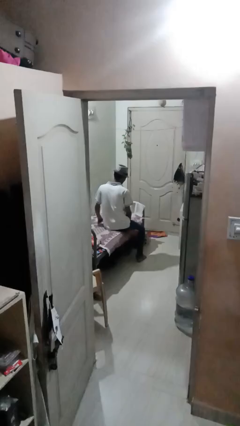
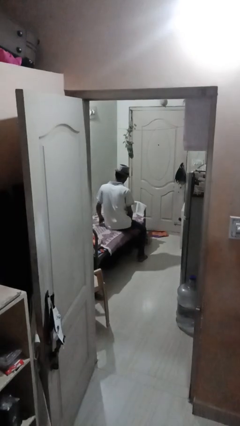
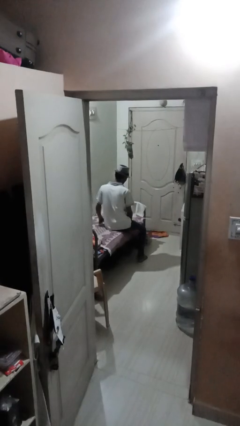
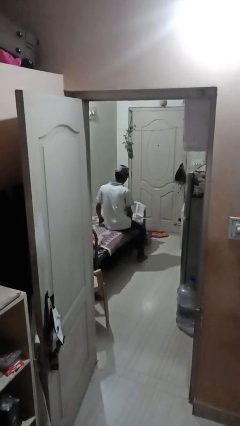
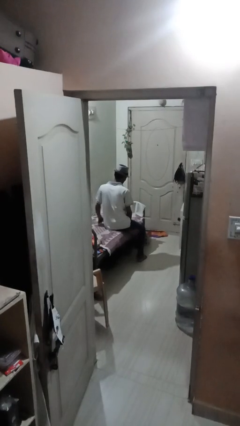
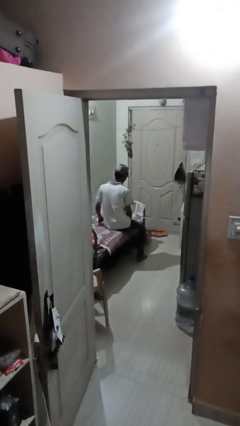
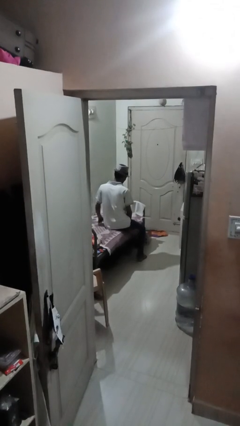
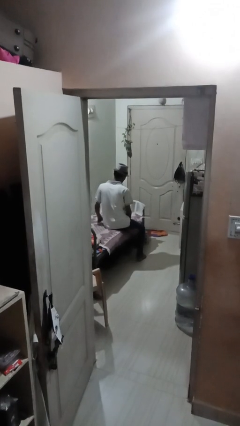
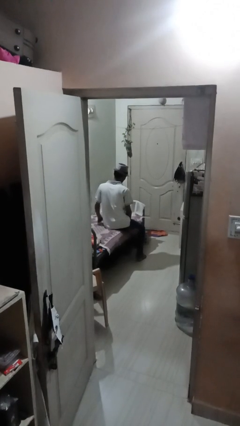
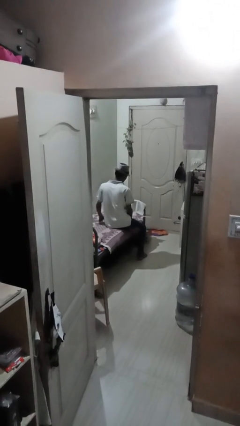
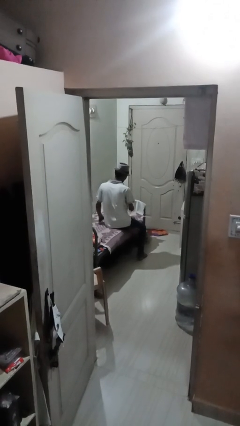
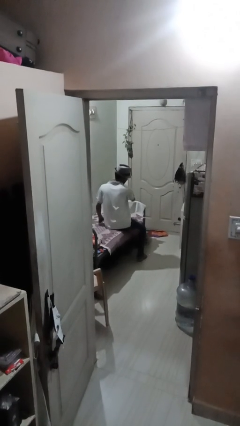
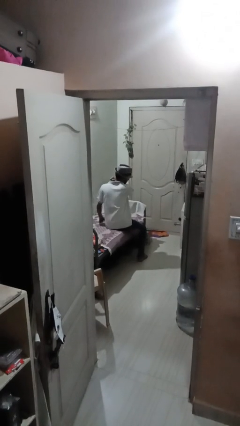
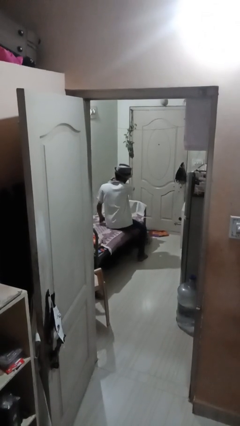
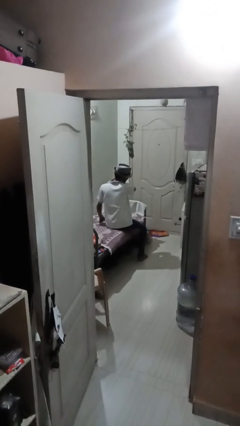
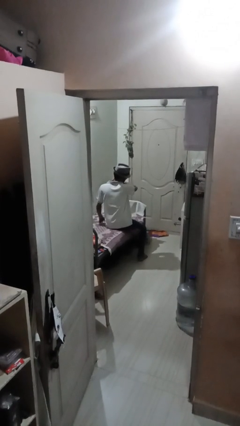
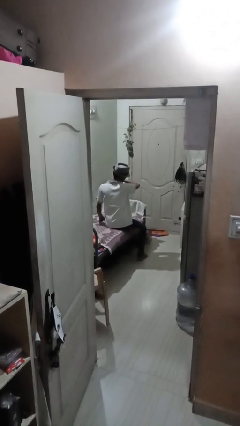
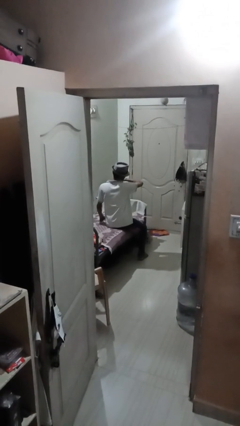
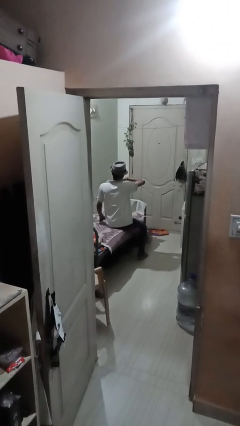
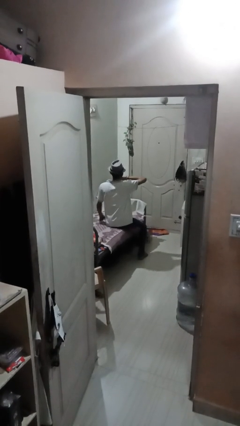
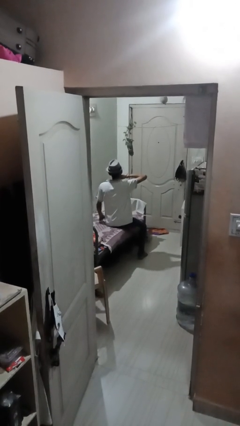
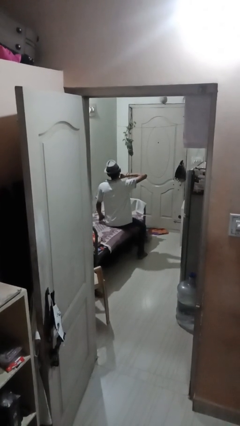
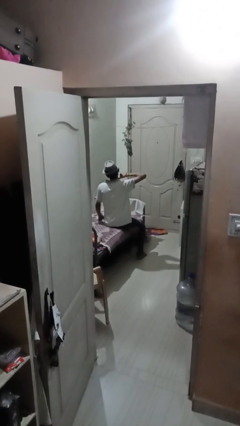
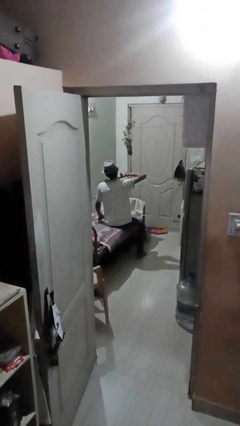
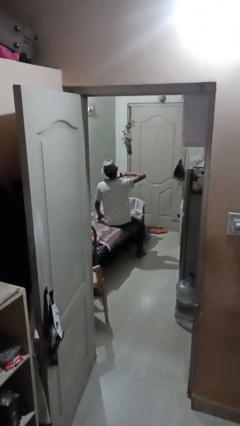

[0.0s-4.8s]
person gestures cut

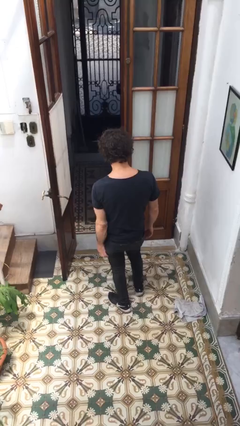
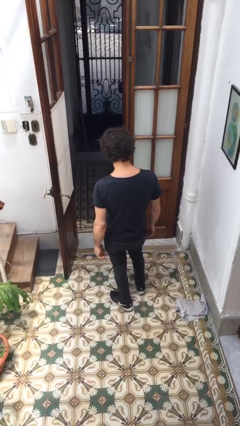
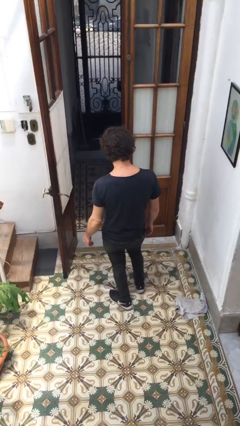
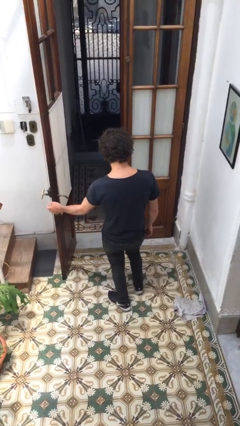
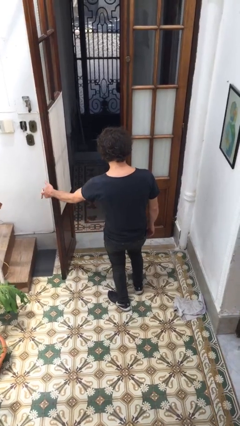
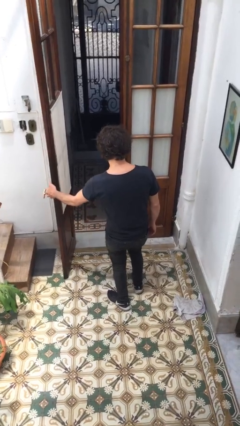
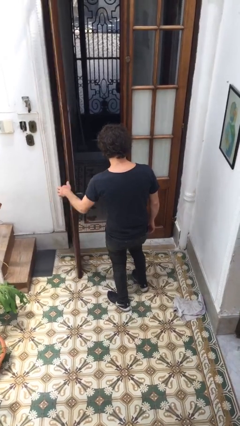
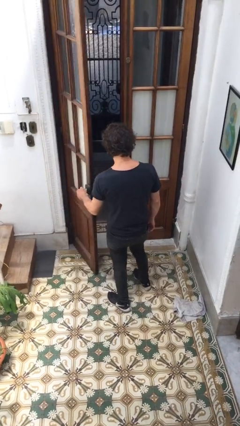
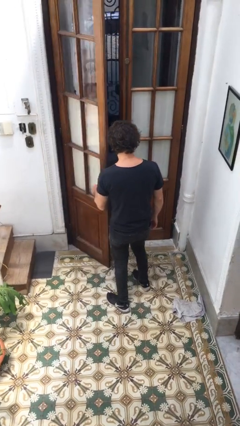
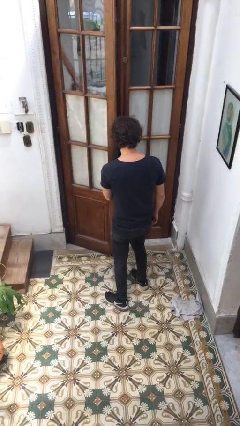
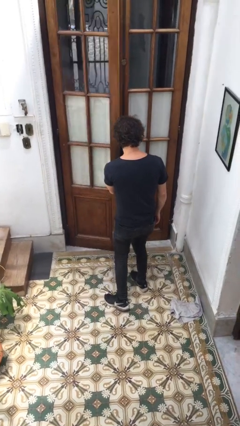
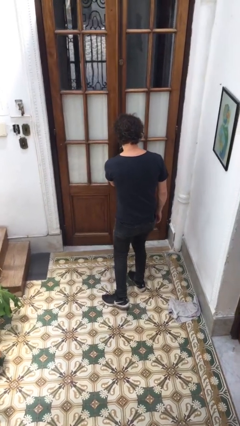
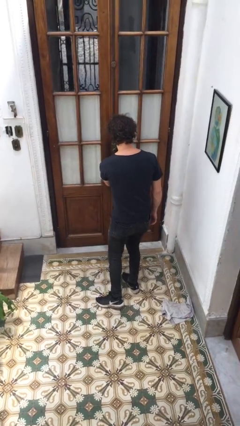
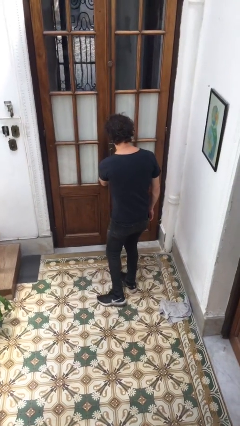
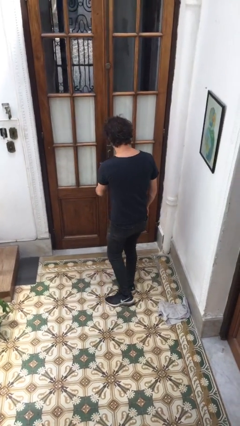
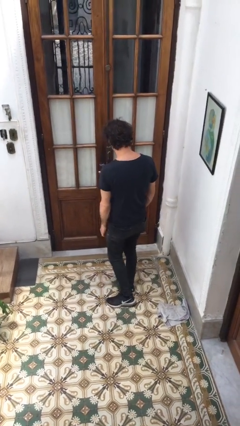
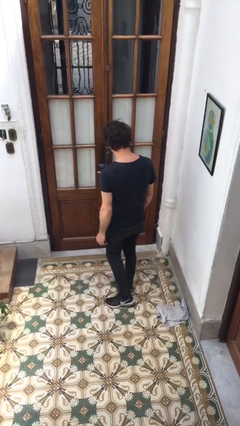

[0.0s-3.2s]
person closes facility door

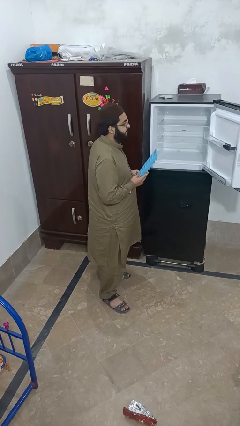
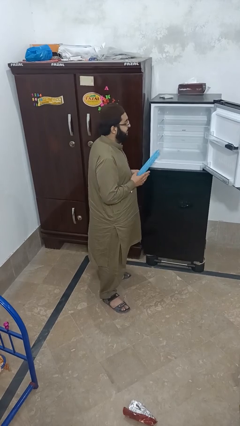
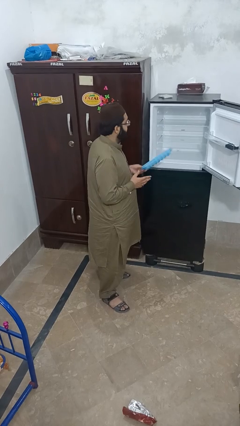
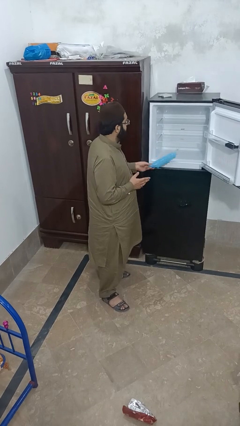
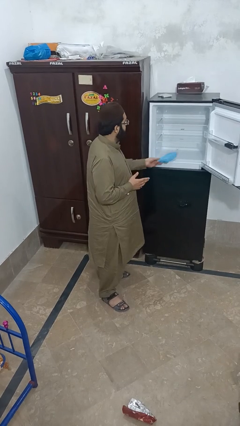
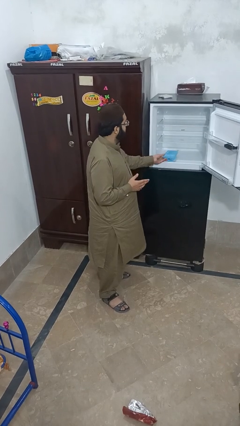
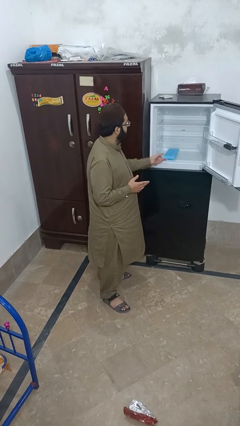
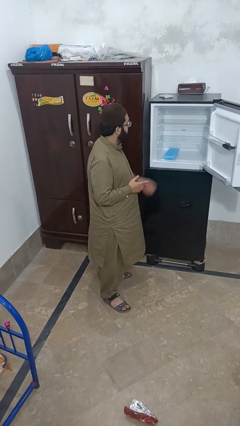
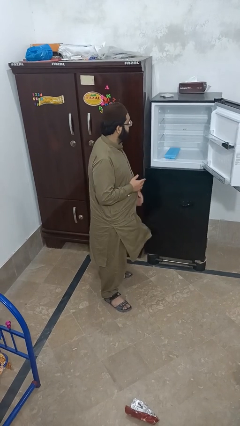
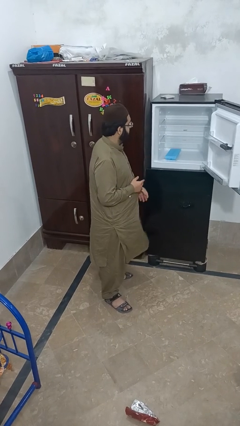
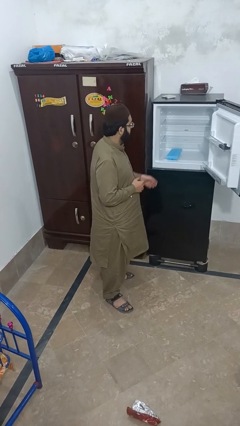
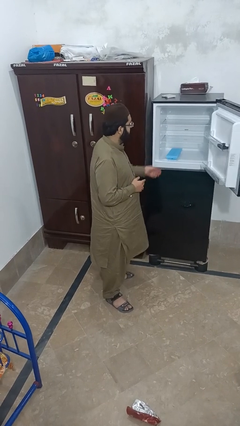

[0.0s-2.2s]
person puts object into refrigerator

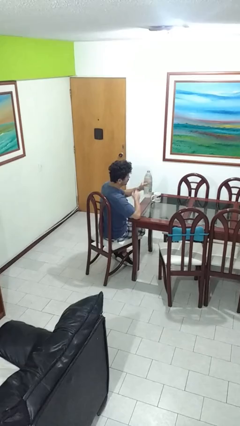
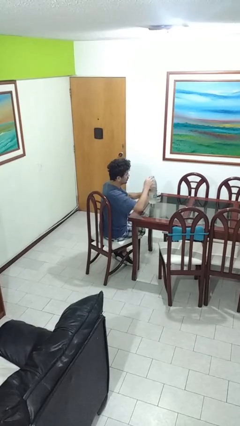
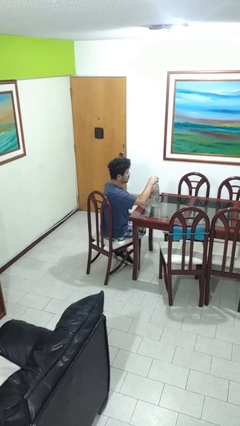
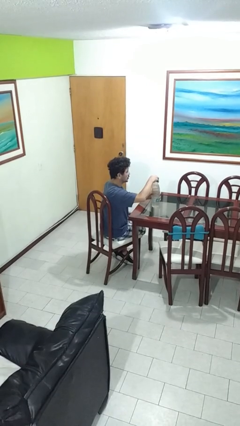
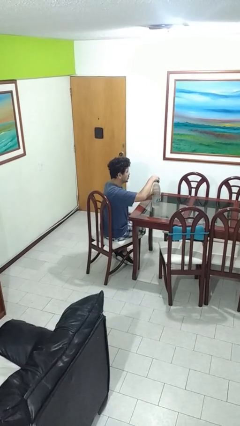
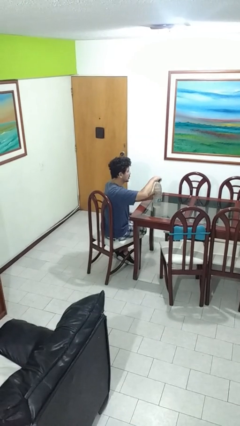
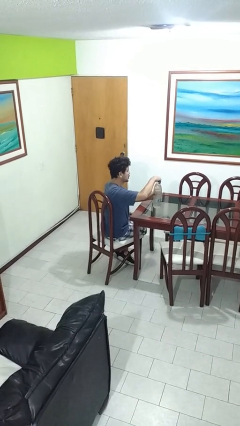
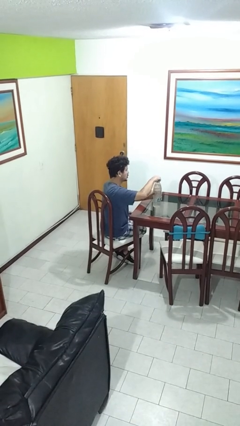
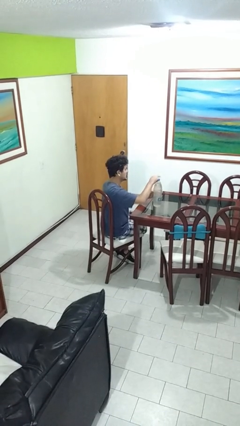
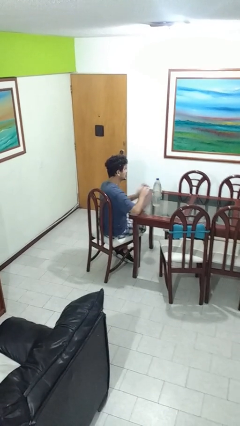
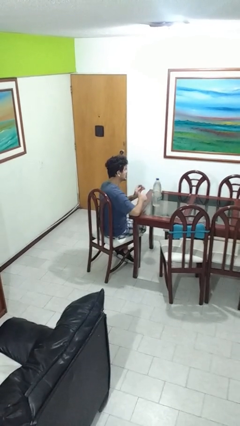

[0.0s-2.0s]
person screws lid to bottle

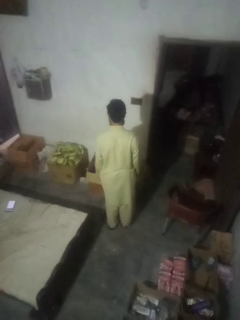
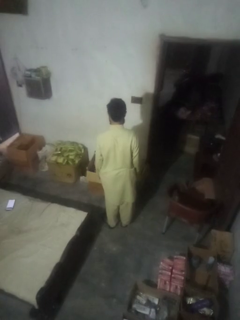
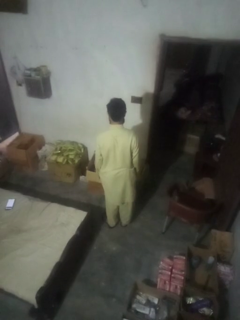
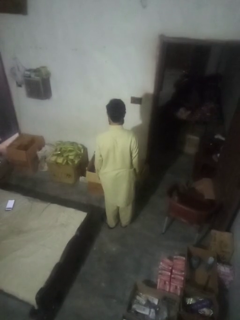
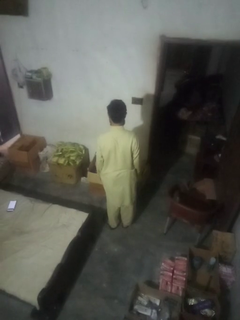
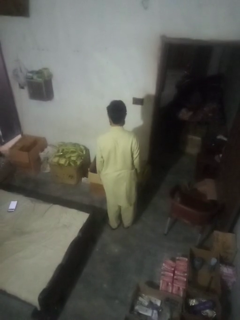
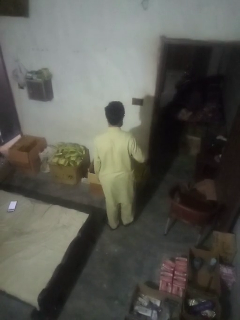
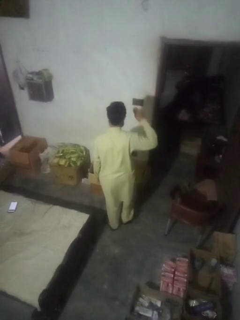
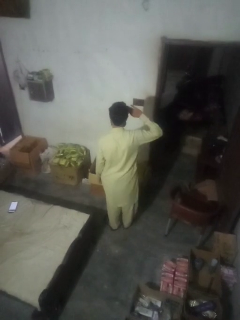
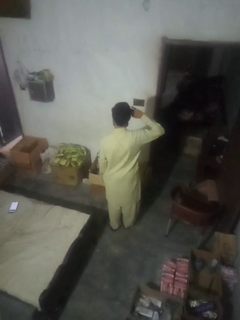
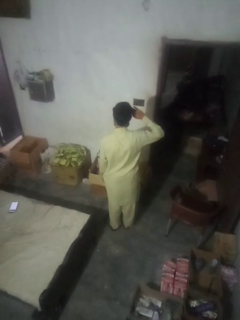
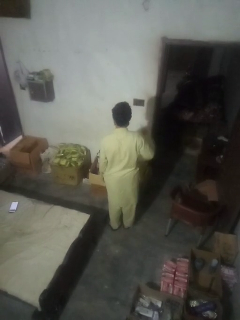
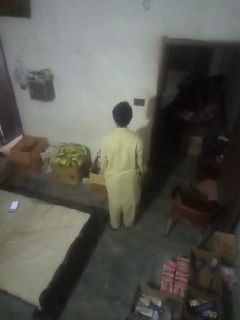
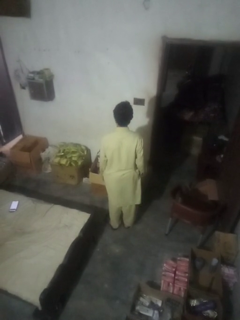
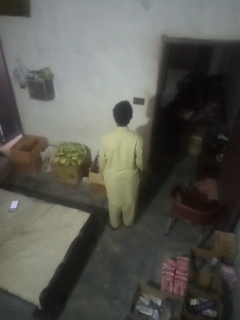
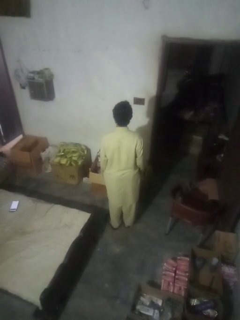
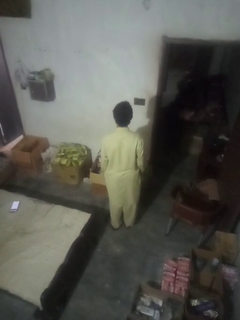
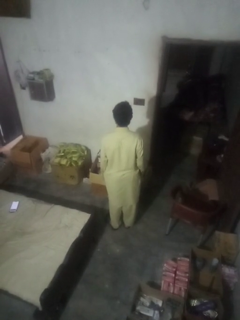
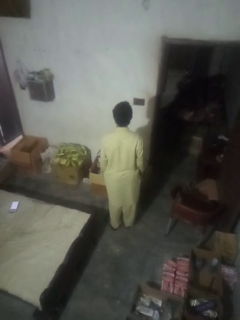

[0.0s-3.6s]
person salutes

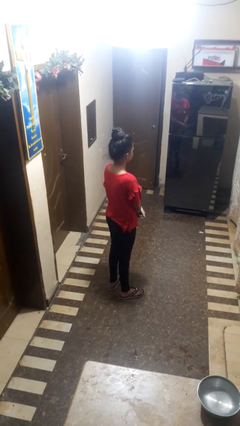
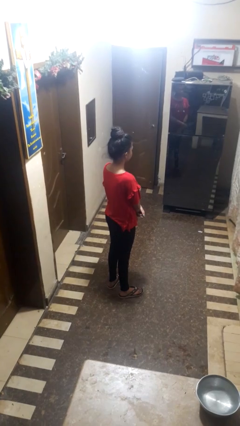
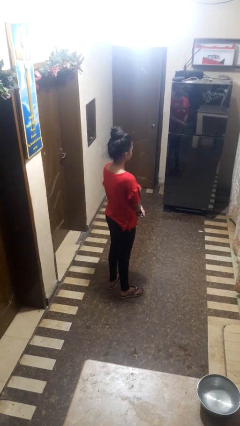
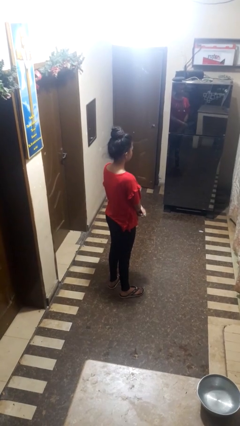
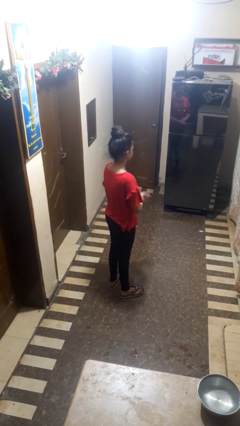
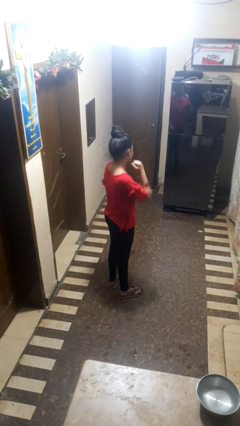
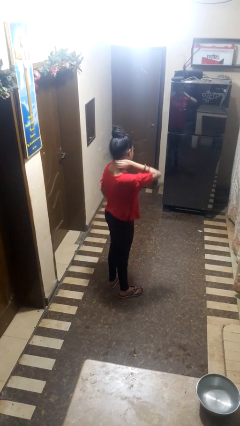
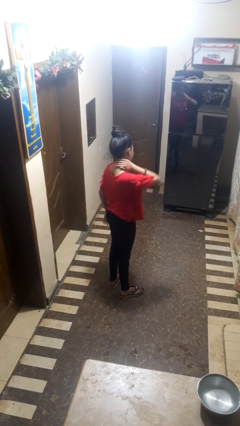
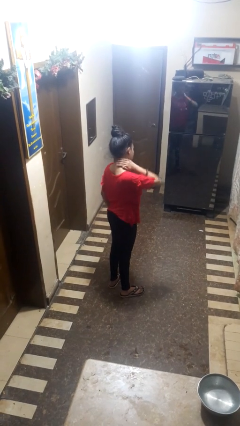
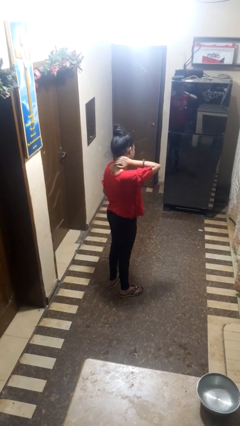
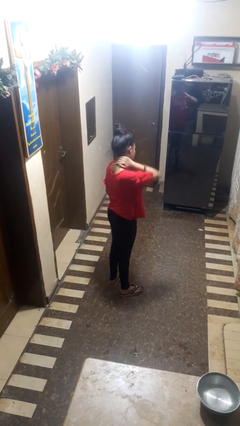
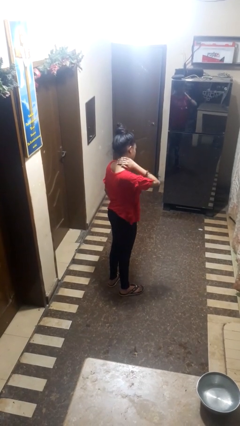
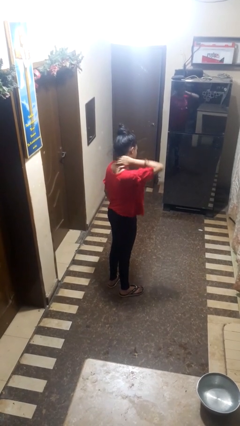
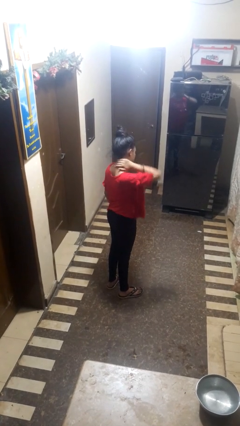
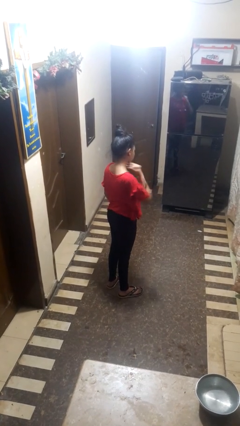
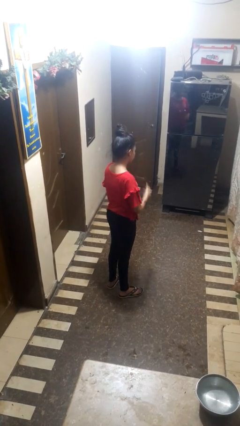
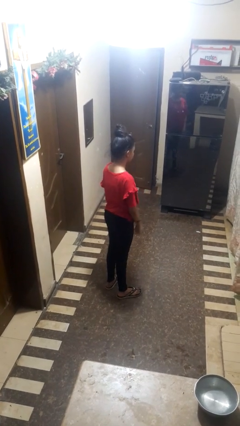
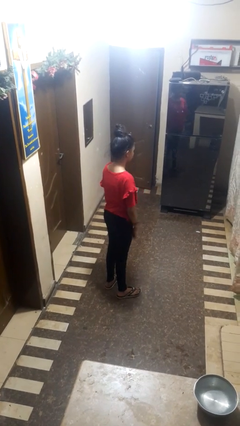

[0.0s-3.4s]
person rubs neck
